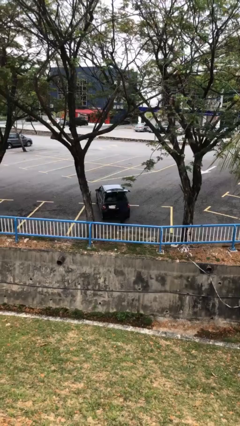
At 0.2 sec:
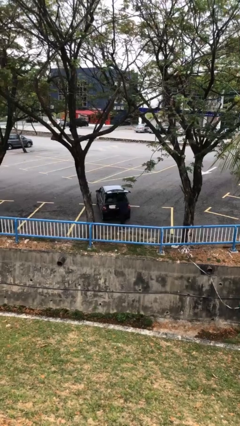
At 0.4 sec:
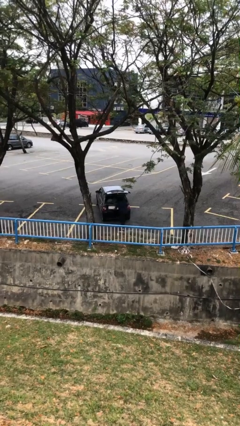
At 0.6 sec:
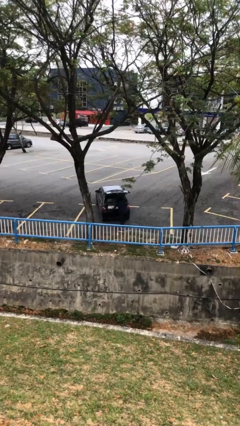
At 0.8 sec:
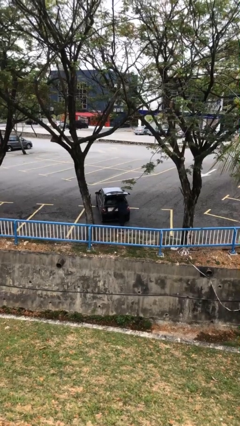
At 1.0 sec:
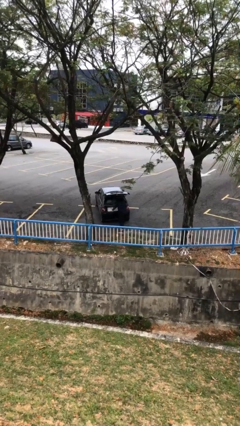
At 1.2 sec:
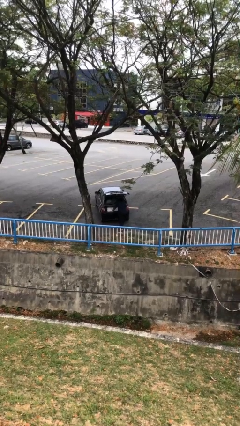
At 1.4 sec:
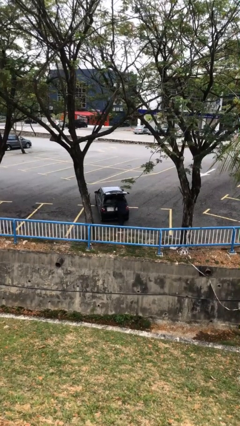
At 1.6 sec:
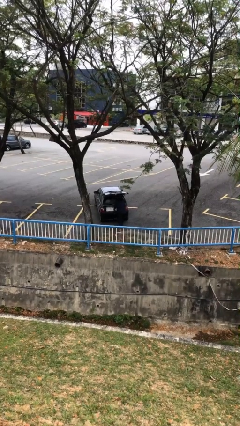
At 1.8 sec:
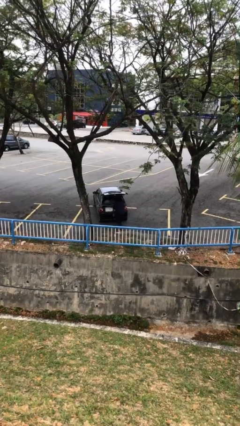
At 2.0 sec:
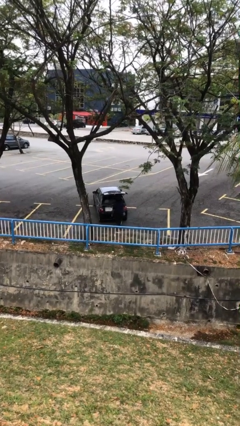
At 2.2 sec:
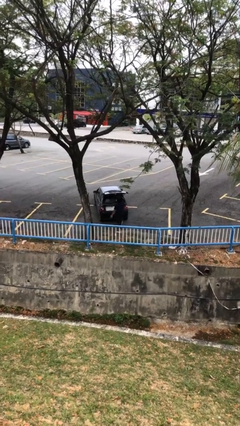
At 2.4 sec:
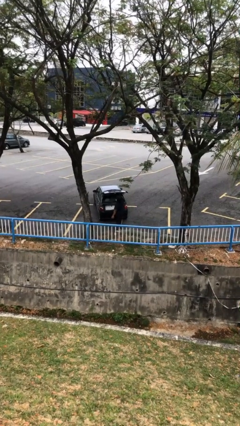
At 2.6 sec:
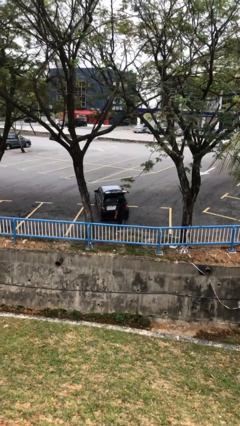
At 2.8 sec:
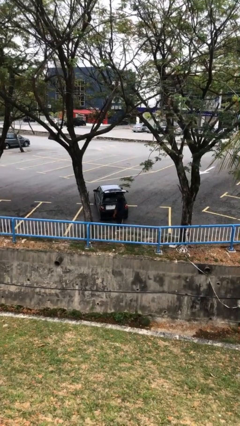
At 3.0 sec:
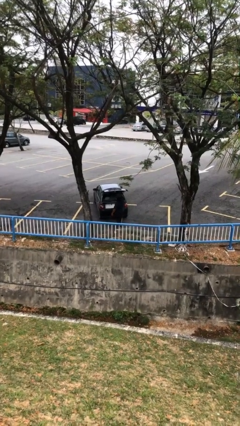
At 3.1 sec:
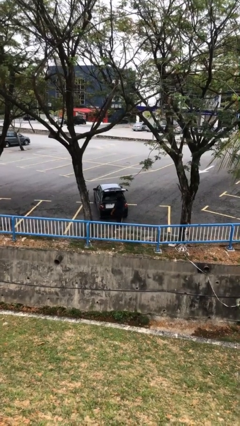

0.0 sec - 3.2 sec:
person loads car

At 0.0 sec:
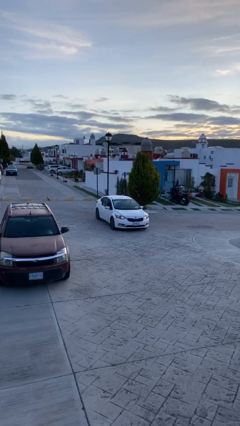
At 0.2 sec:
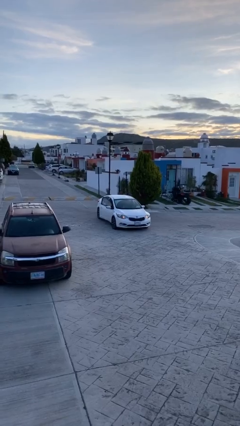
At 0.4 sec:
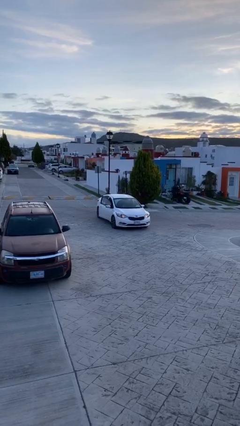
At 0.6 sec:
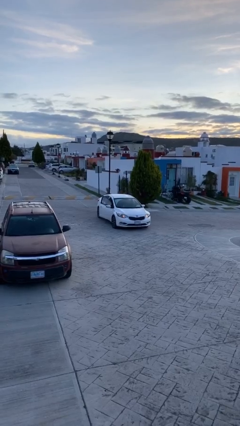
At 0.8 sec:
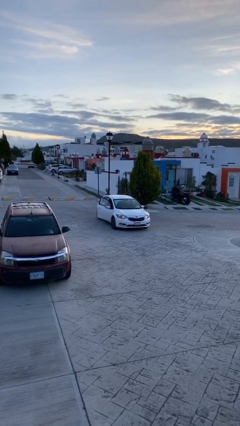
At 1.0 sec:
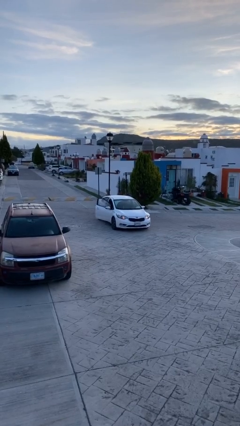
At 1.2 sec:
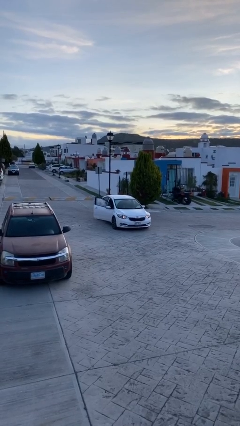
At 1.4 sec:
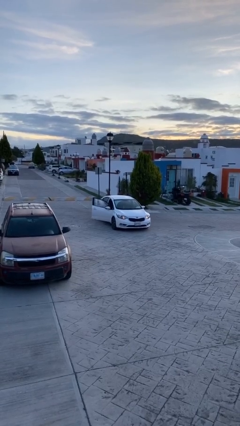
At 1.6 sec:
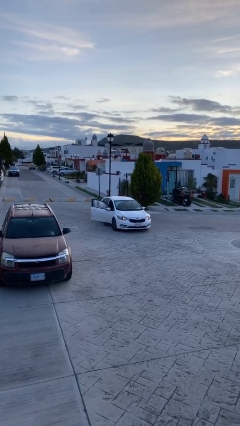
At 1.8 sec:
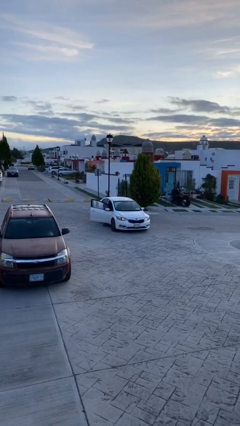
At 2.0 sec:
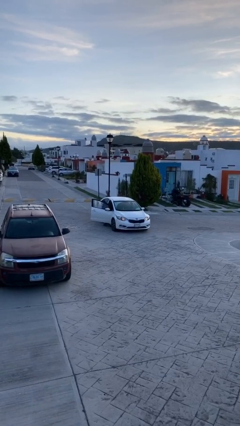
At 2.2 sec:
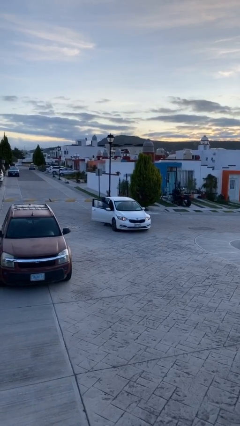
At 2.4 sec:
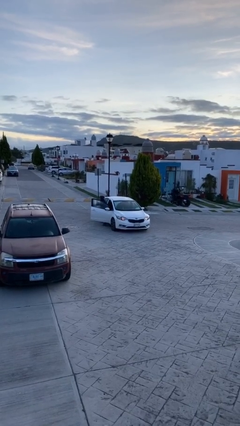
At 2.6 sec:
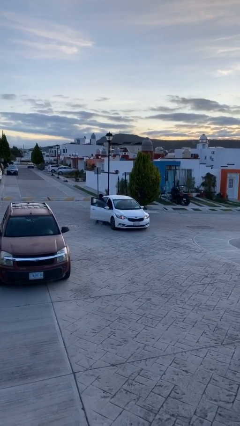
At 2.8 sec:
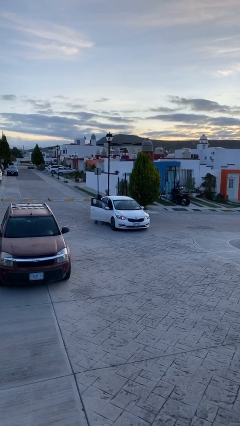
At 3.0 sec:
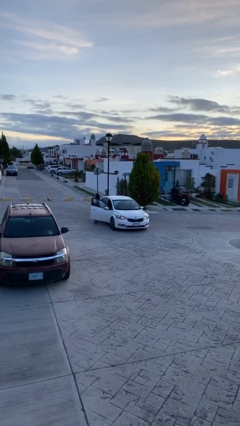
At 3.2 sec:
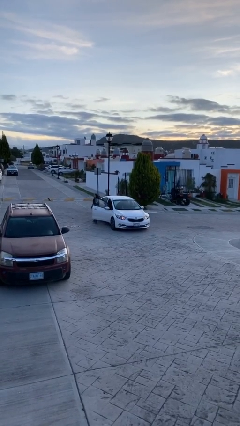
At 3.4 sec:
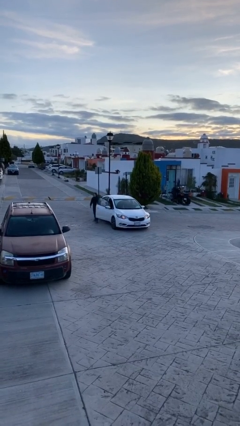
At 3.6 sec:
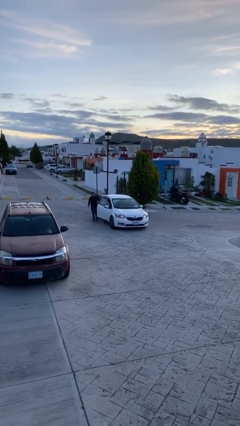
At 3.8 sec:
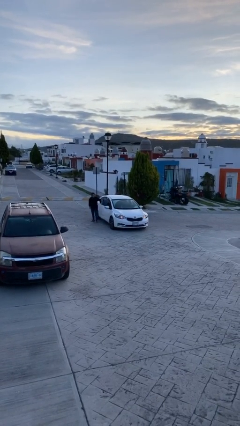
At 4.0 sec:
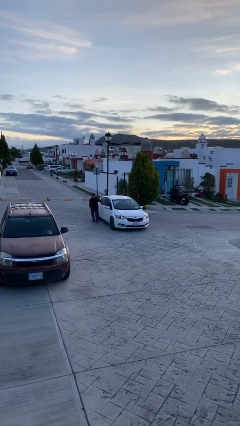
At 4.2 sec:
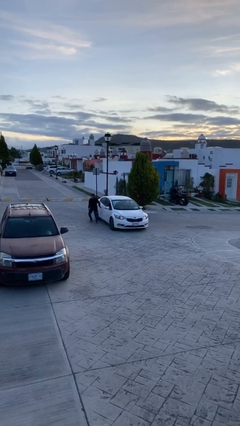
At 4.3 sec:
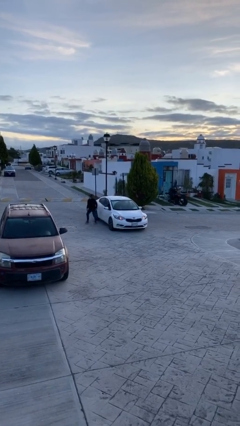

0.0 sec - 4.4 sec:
car drops off person

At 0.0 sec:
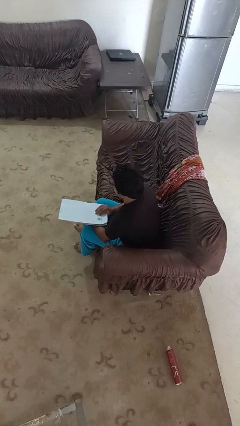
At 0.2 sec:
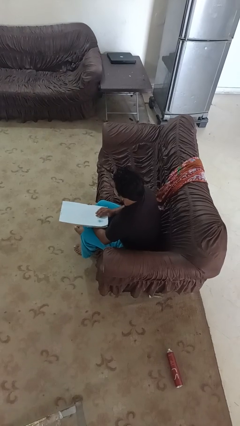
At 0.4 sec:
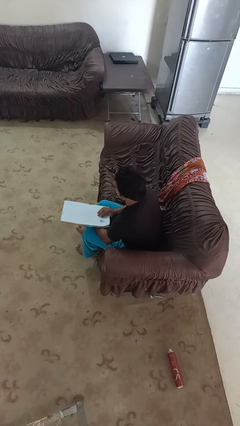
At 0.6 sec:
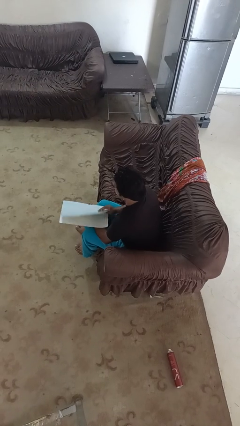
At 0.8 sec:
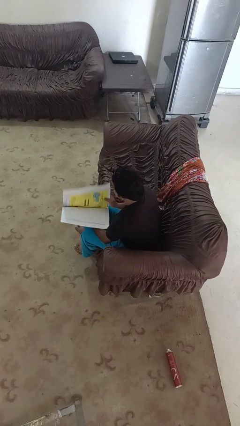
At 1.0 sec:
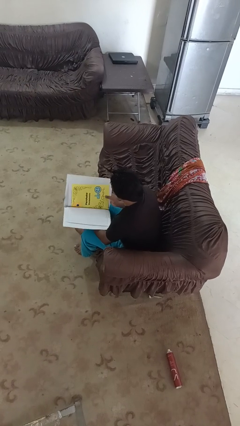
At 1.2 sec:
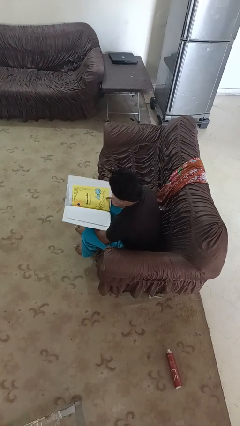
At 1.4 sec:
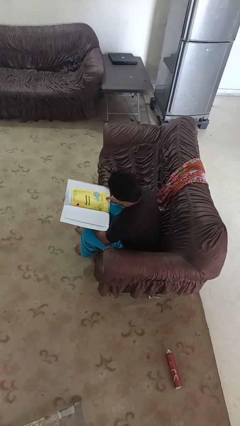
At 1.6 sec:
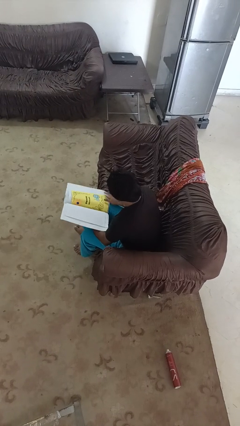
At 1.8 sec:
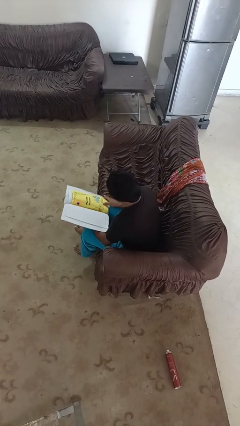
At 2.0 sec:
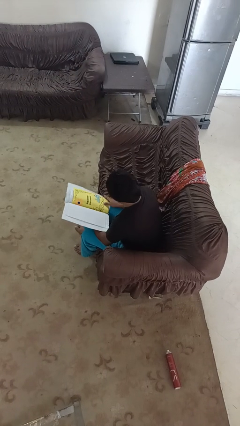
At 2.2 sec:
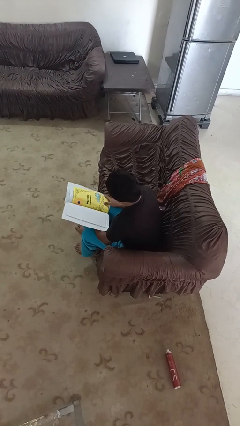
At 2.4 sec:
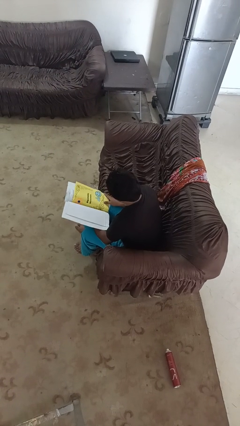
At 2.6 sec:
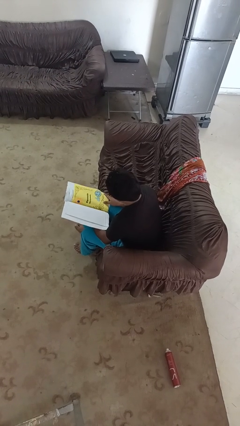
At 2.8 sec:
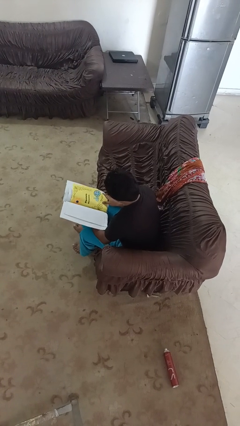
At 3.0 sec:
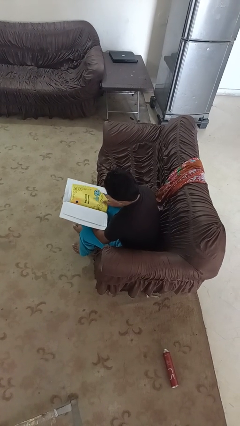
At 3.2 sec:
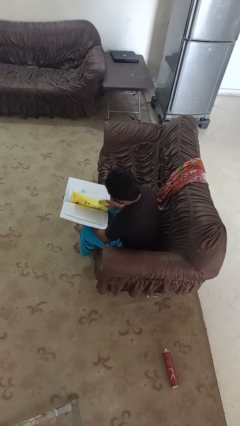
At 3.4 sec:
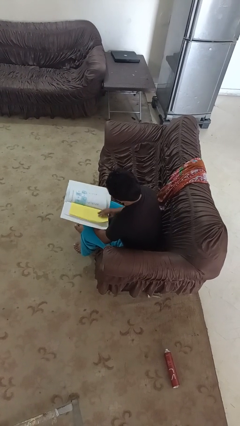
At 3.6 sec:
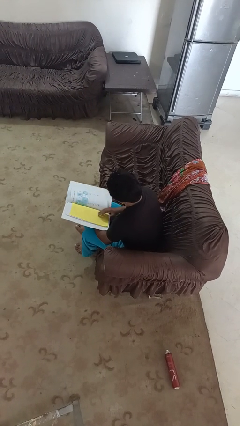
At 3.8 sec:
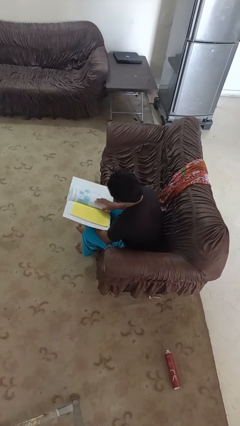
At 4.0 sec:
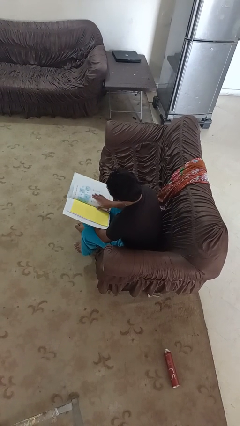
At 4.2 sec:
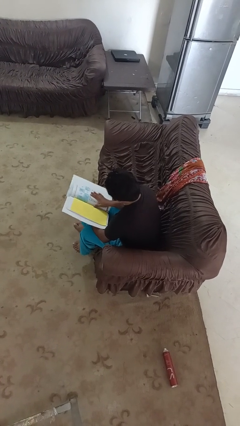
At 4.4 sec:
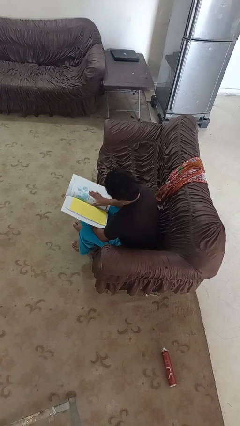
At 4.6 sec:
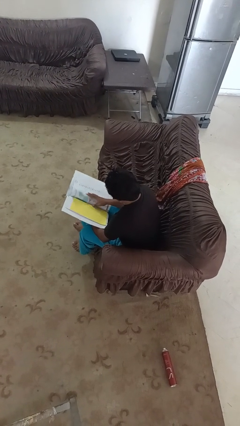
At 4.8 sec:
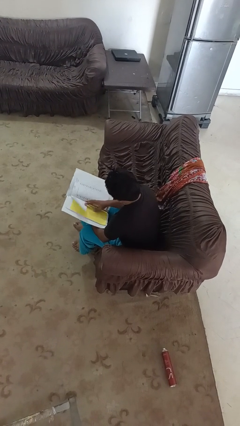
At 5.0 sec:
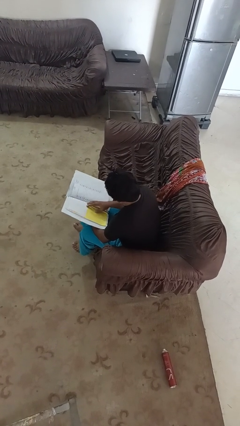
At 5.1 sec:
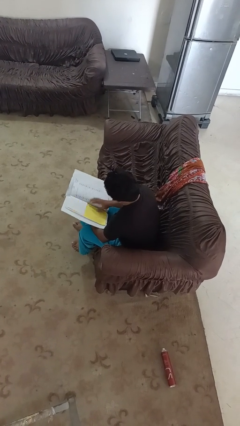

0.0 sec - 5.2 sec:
person reads magazine

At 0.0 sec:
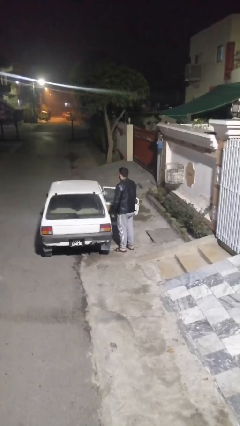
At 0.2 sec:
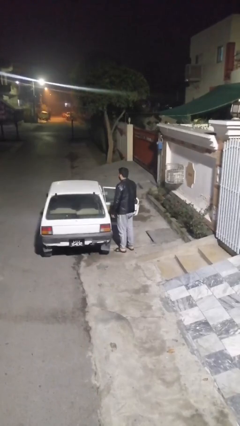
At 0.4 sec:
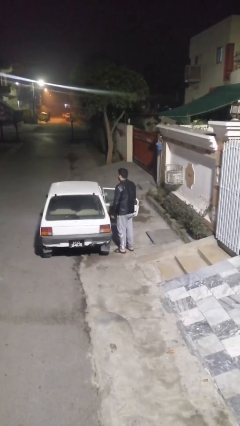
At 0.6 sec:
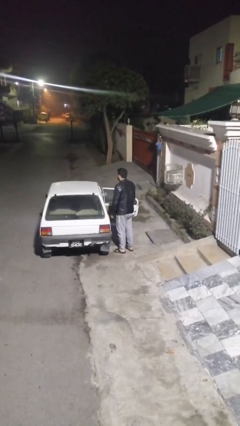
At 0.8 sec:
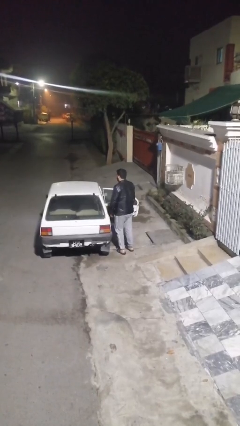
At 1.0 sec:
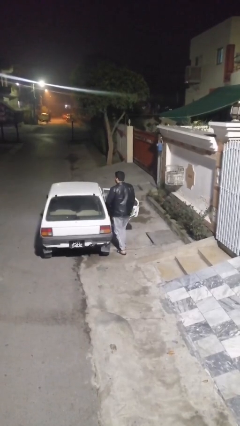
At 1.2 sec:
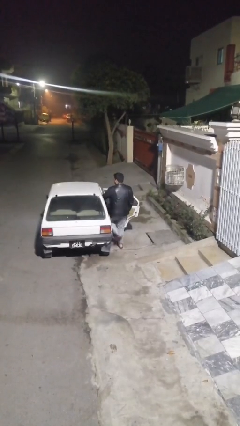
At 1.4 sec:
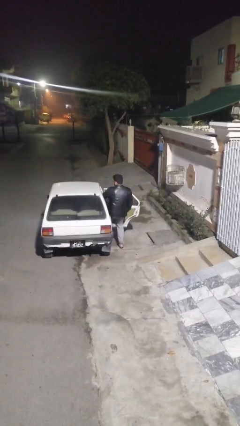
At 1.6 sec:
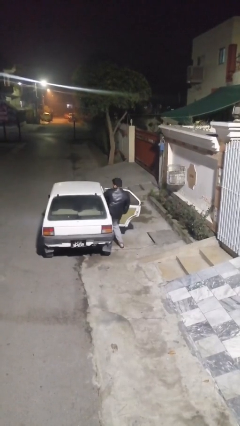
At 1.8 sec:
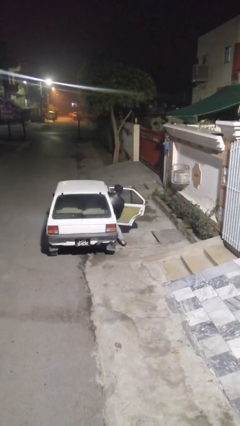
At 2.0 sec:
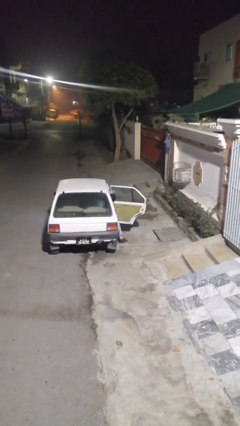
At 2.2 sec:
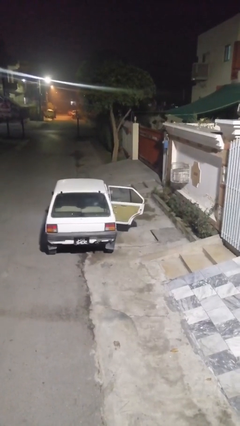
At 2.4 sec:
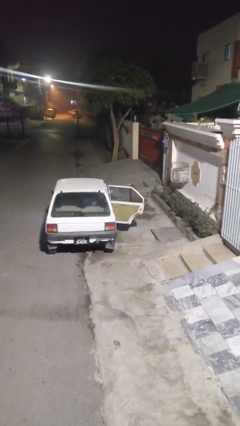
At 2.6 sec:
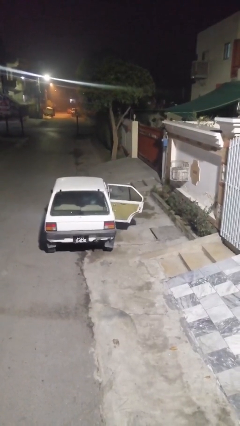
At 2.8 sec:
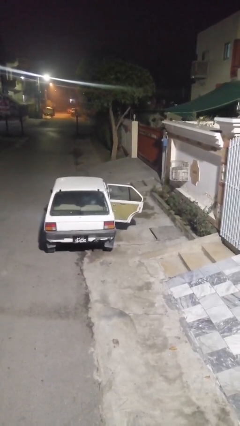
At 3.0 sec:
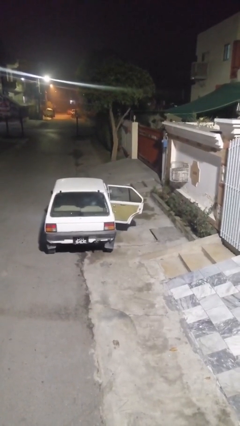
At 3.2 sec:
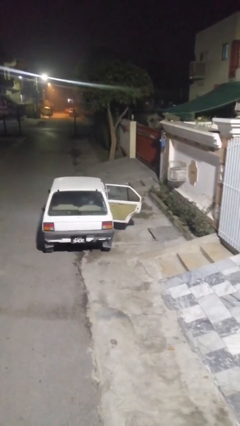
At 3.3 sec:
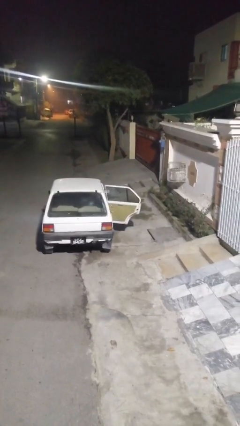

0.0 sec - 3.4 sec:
person enters car

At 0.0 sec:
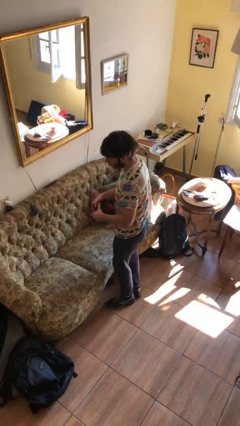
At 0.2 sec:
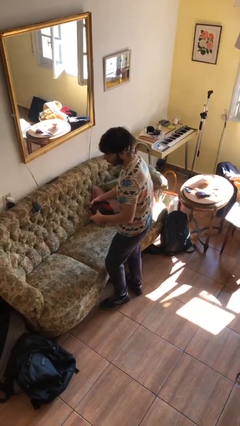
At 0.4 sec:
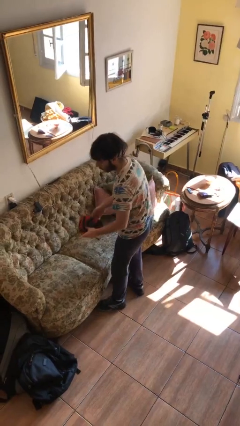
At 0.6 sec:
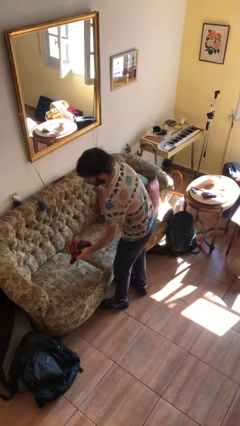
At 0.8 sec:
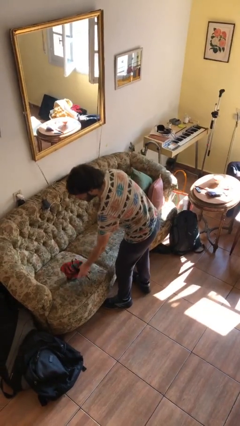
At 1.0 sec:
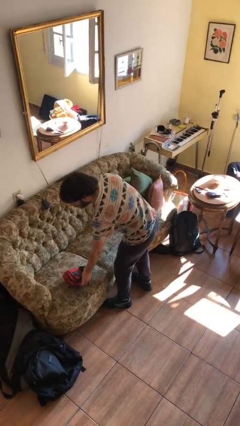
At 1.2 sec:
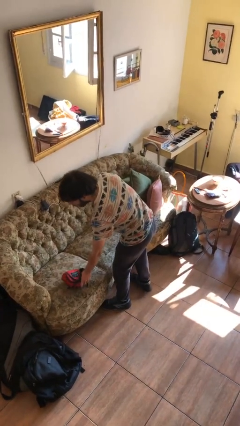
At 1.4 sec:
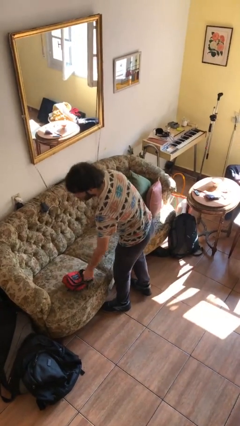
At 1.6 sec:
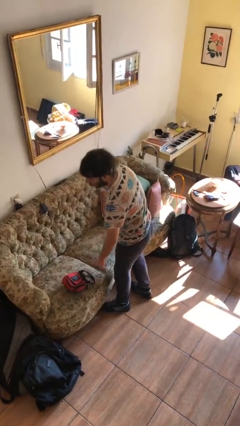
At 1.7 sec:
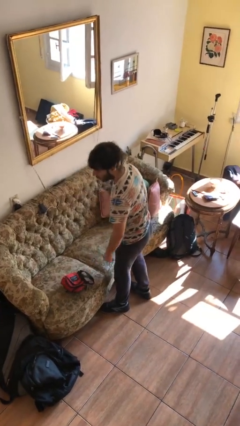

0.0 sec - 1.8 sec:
person puts down object on couch
